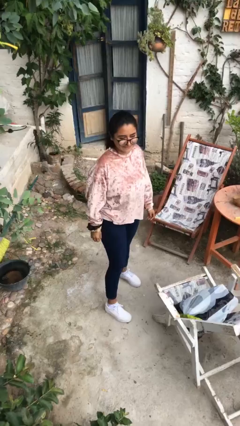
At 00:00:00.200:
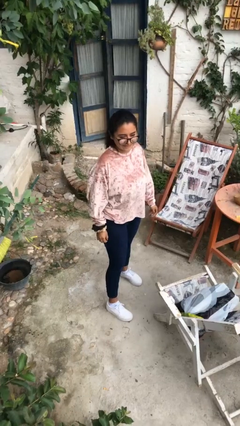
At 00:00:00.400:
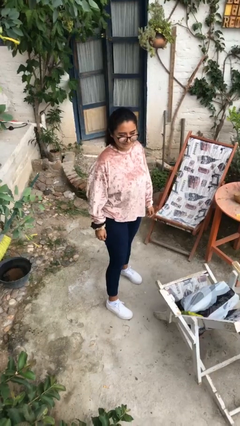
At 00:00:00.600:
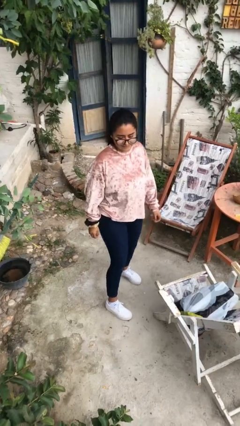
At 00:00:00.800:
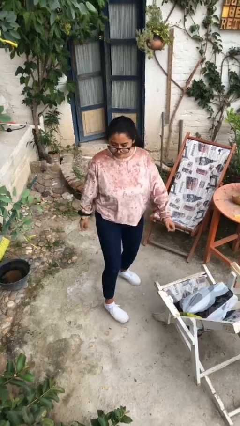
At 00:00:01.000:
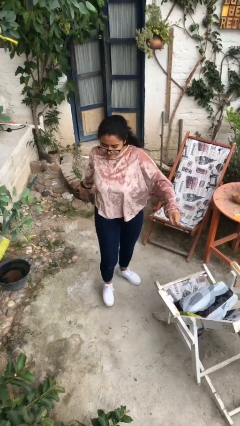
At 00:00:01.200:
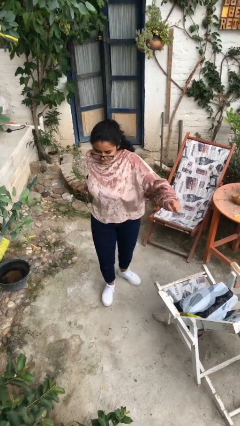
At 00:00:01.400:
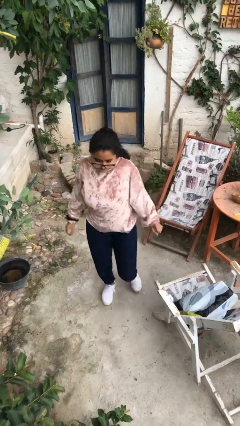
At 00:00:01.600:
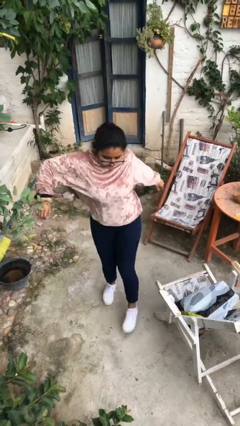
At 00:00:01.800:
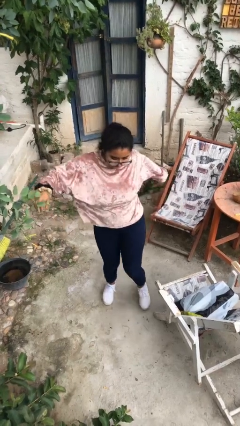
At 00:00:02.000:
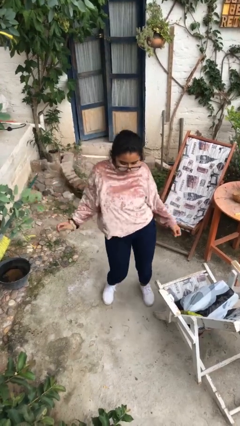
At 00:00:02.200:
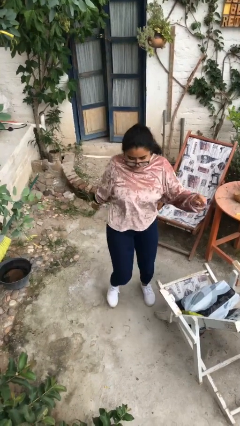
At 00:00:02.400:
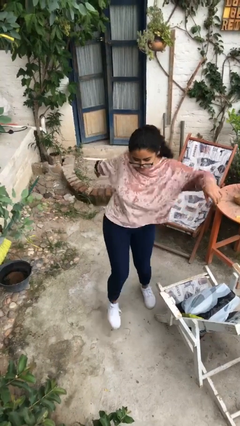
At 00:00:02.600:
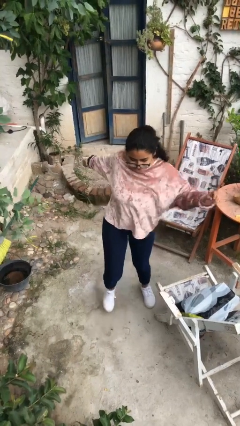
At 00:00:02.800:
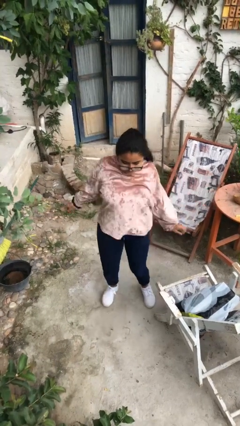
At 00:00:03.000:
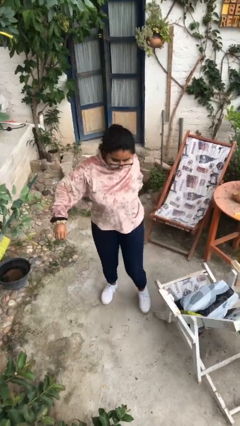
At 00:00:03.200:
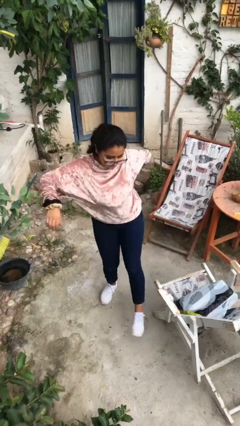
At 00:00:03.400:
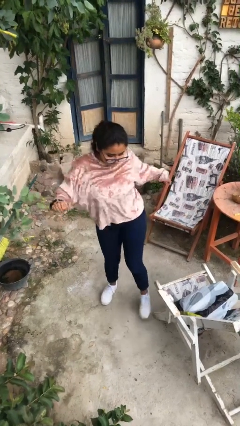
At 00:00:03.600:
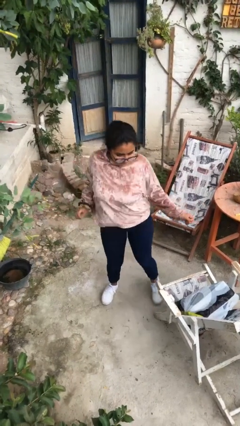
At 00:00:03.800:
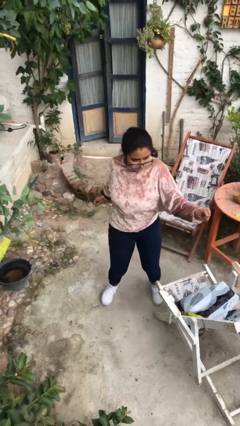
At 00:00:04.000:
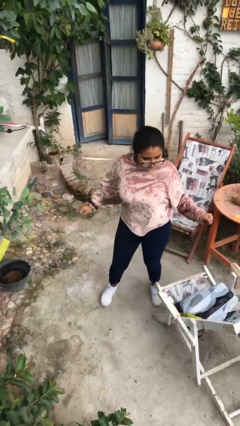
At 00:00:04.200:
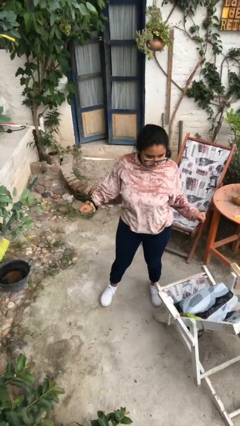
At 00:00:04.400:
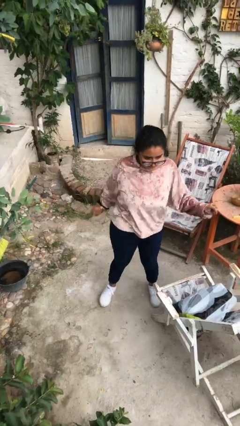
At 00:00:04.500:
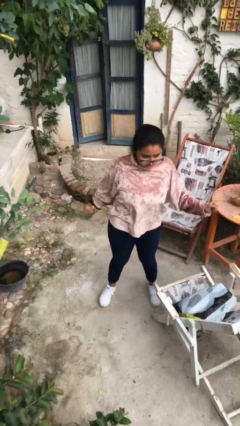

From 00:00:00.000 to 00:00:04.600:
person dances in place

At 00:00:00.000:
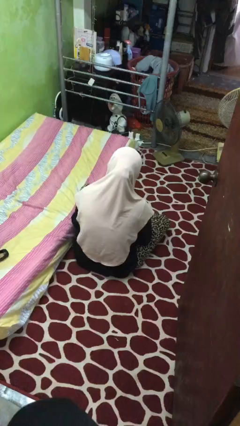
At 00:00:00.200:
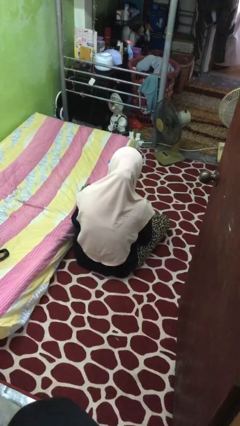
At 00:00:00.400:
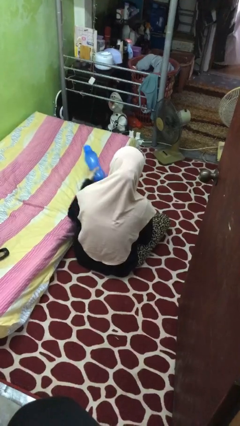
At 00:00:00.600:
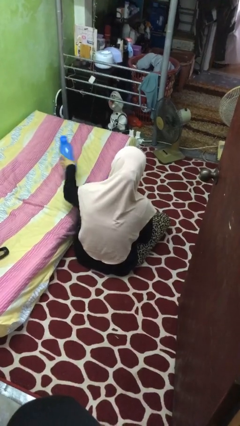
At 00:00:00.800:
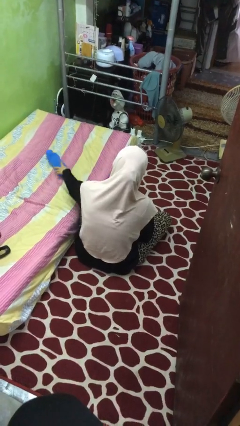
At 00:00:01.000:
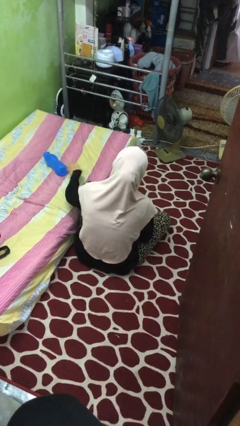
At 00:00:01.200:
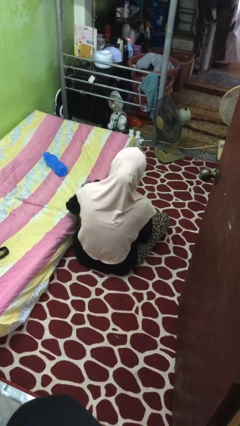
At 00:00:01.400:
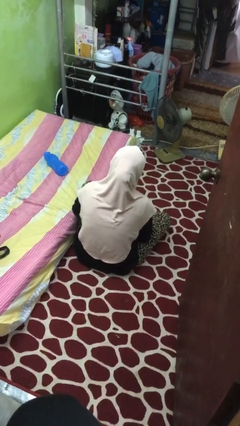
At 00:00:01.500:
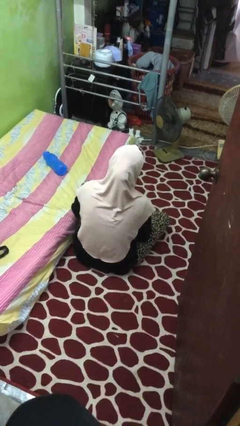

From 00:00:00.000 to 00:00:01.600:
person puts down object on bed

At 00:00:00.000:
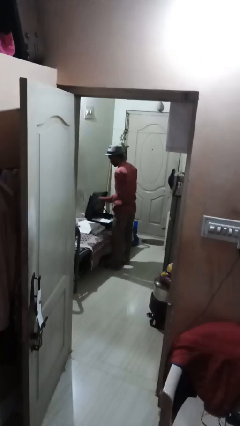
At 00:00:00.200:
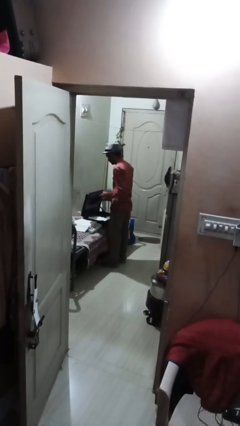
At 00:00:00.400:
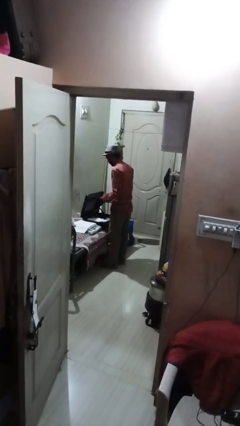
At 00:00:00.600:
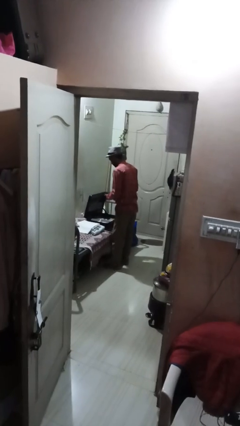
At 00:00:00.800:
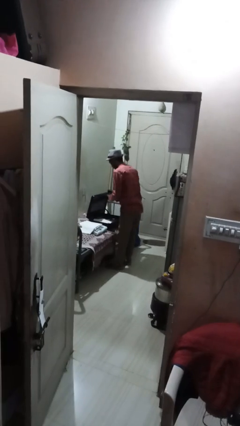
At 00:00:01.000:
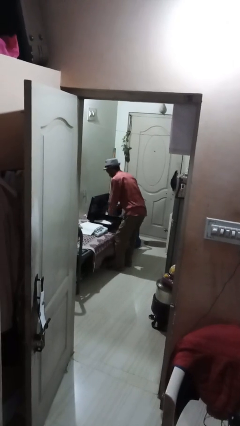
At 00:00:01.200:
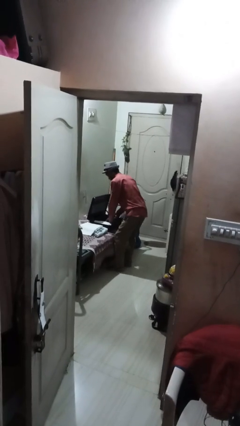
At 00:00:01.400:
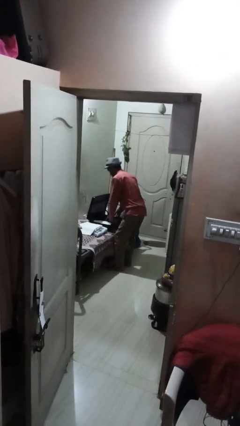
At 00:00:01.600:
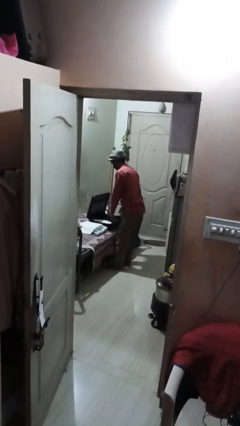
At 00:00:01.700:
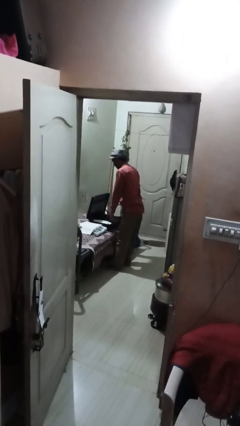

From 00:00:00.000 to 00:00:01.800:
person loads clothes into suitcase

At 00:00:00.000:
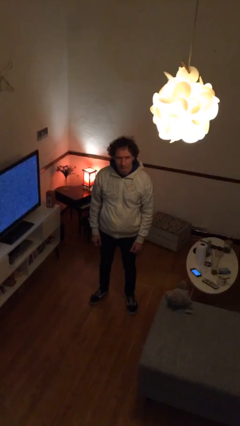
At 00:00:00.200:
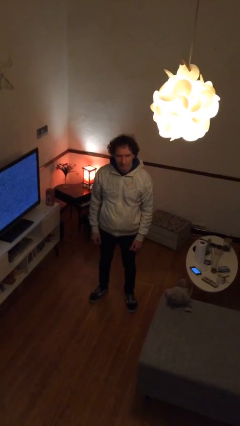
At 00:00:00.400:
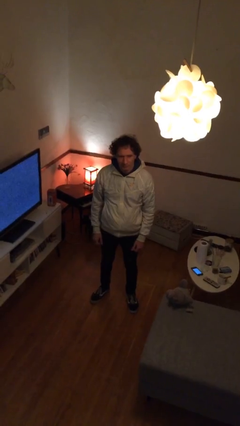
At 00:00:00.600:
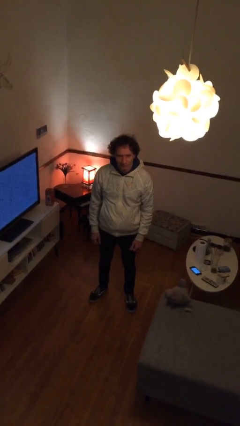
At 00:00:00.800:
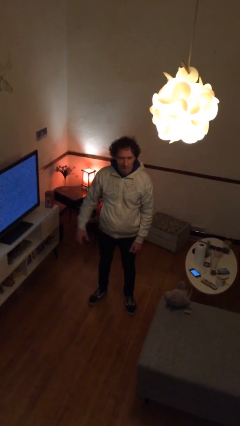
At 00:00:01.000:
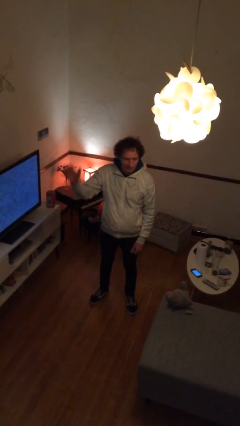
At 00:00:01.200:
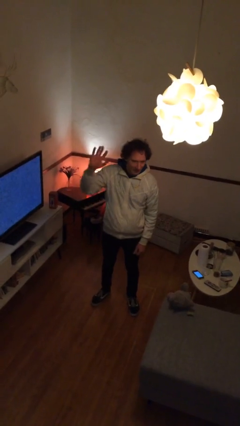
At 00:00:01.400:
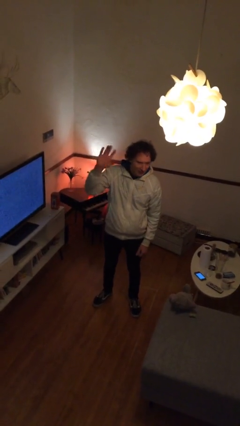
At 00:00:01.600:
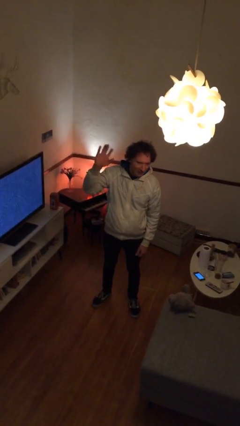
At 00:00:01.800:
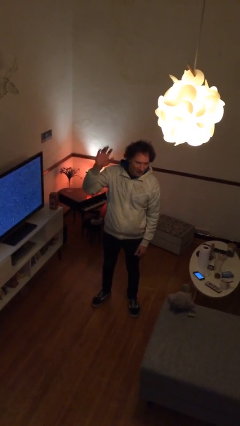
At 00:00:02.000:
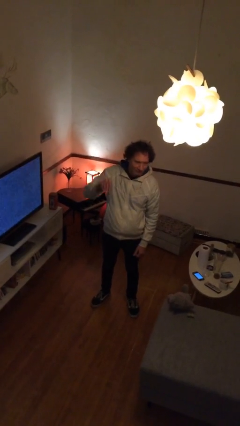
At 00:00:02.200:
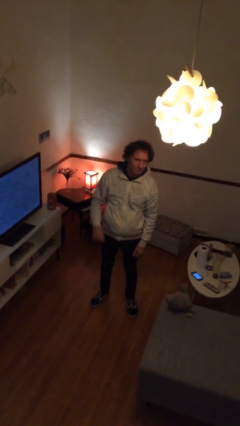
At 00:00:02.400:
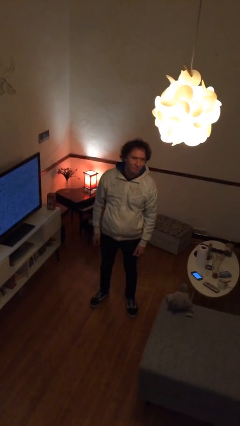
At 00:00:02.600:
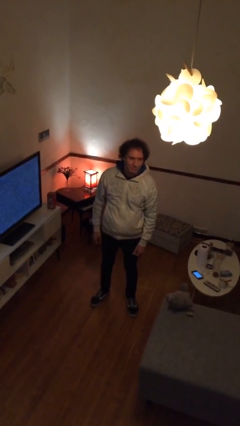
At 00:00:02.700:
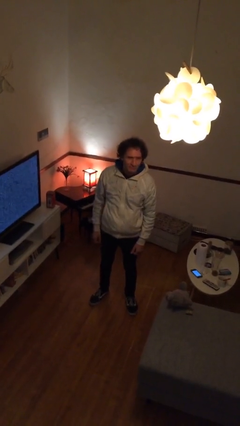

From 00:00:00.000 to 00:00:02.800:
person waves at person

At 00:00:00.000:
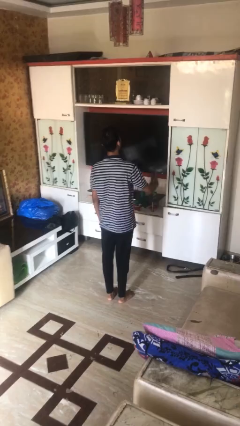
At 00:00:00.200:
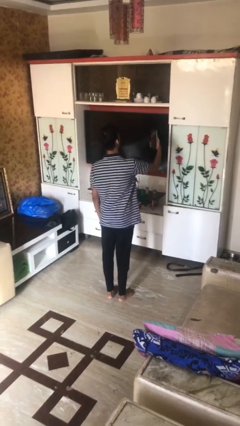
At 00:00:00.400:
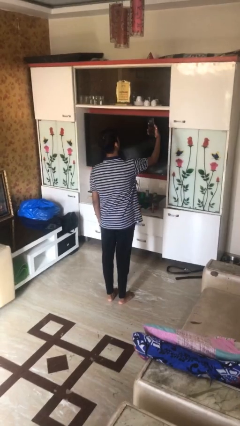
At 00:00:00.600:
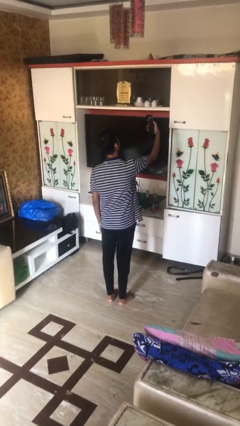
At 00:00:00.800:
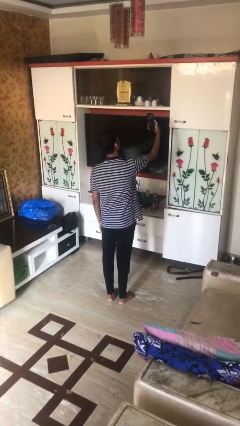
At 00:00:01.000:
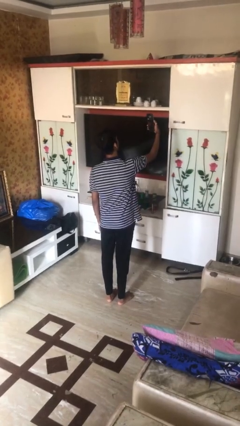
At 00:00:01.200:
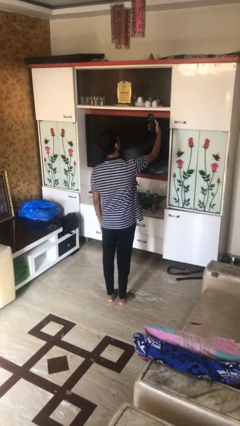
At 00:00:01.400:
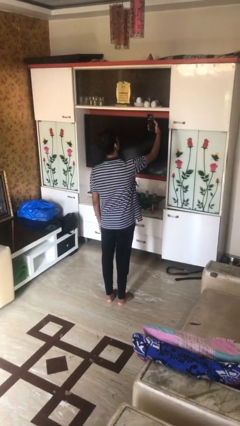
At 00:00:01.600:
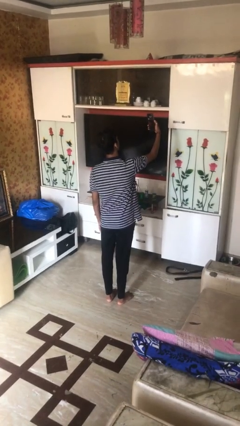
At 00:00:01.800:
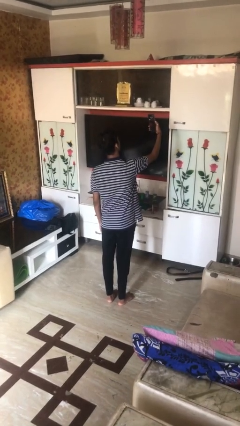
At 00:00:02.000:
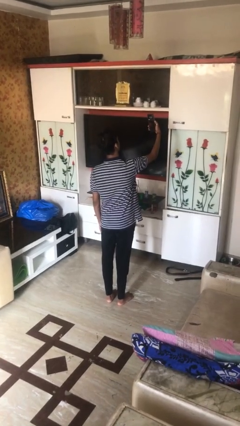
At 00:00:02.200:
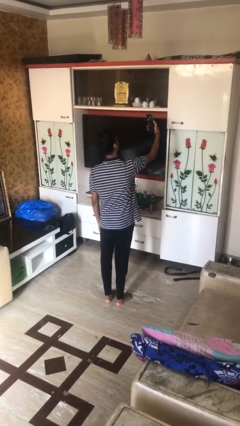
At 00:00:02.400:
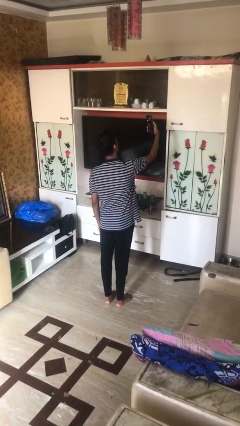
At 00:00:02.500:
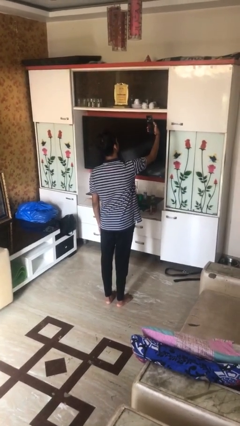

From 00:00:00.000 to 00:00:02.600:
person takes selfie

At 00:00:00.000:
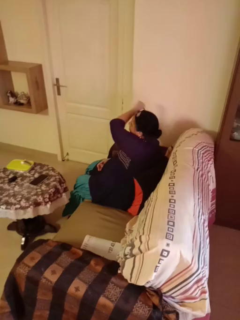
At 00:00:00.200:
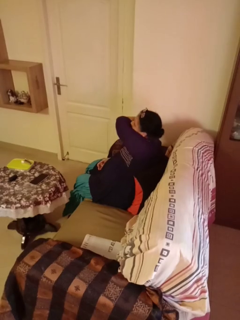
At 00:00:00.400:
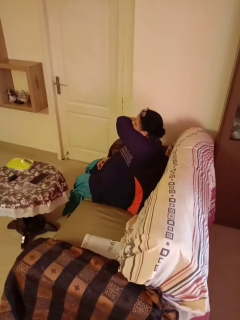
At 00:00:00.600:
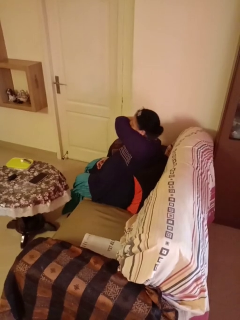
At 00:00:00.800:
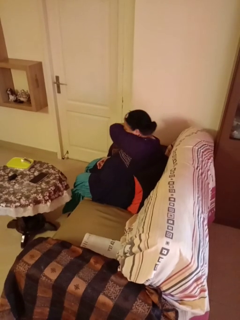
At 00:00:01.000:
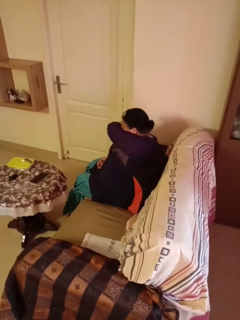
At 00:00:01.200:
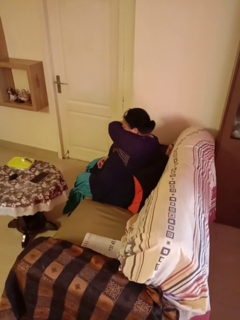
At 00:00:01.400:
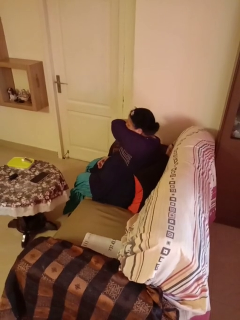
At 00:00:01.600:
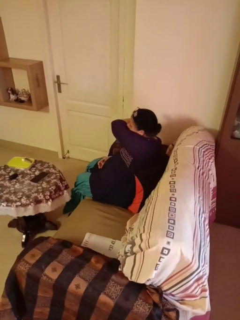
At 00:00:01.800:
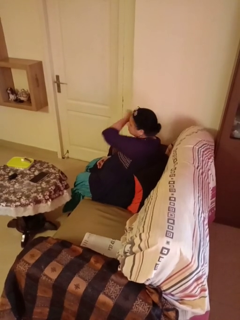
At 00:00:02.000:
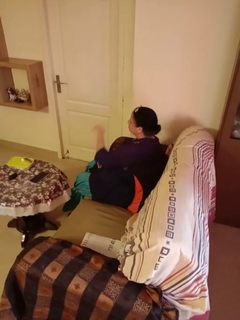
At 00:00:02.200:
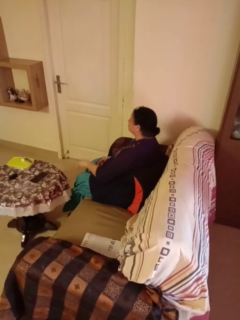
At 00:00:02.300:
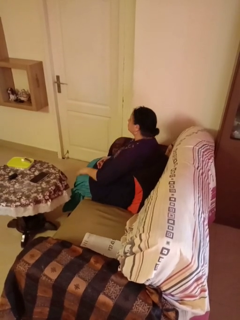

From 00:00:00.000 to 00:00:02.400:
person sneezes into arm

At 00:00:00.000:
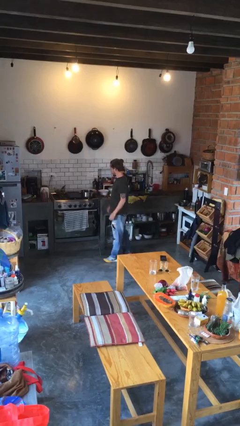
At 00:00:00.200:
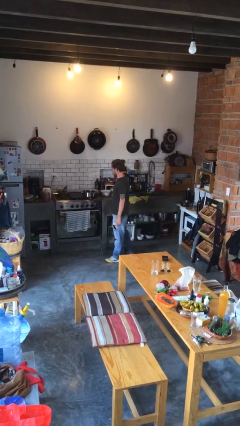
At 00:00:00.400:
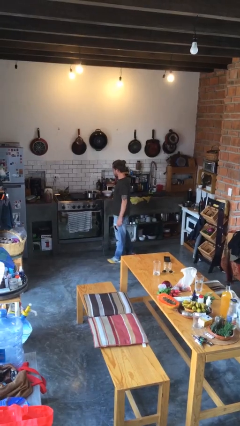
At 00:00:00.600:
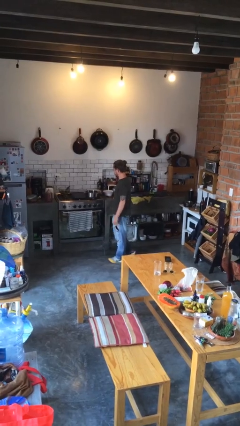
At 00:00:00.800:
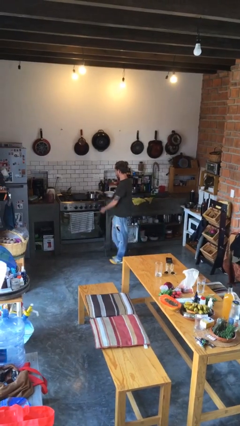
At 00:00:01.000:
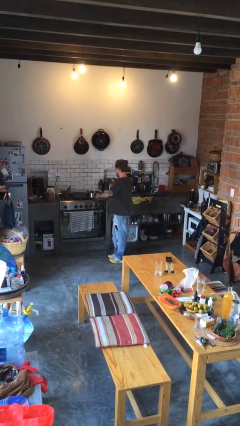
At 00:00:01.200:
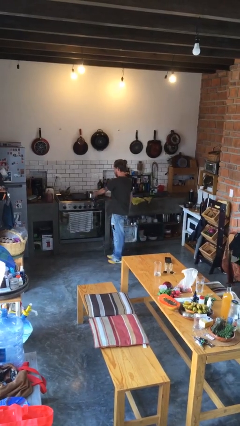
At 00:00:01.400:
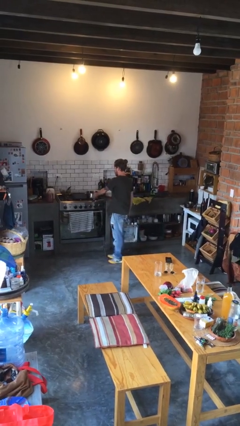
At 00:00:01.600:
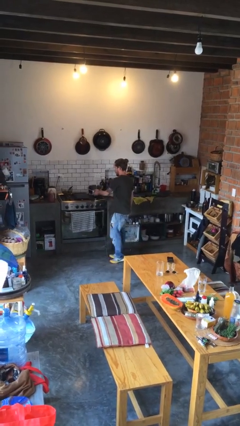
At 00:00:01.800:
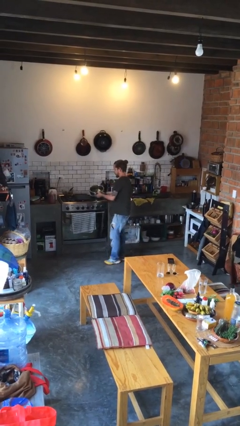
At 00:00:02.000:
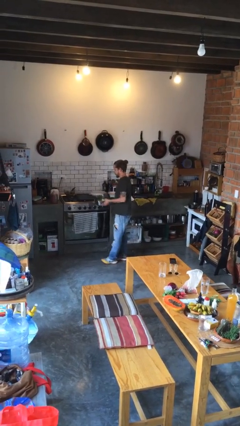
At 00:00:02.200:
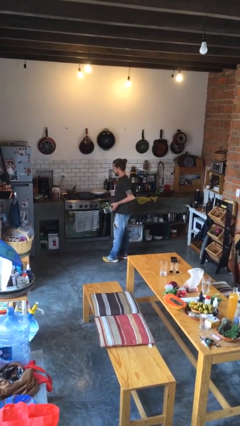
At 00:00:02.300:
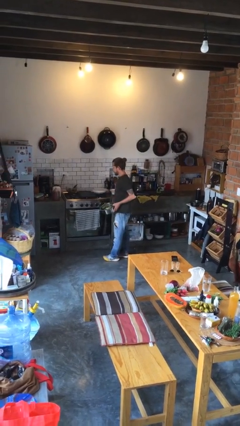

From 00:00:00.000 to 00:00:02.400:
person picks up object from countertop
